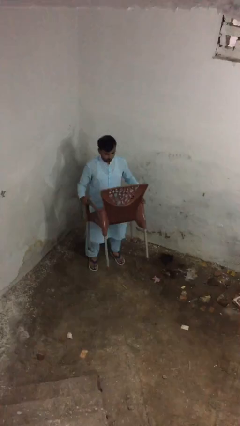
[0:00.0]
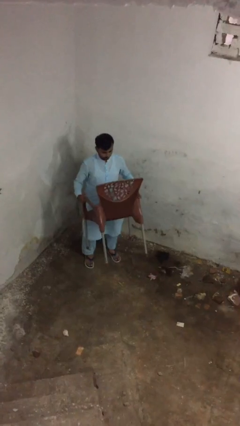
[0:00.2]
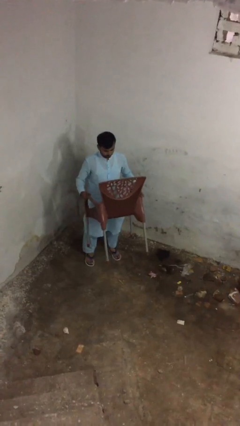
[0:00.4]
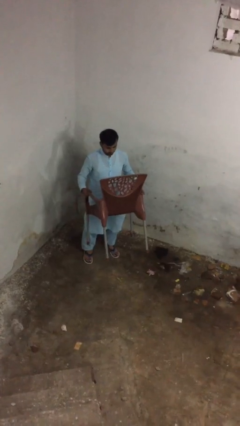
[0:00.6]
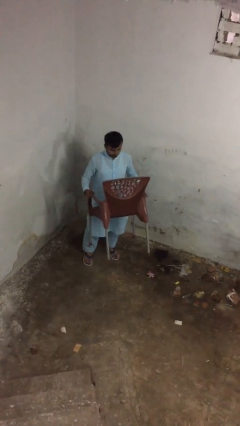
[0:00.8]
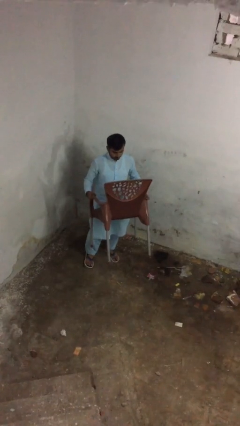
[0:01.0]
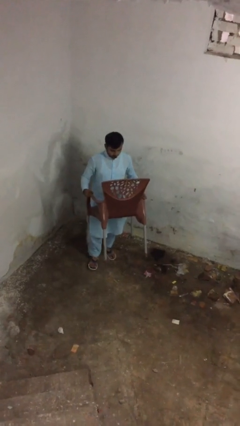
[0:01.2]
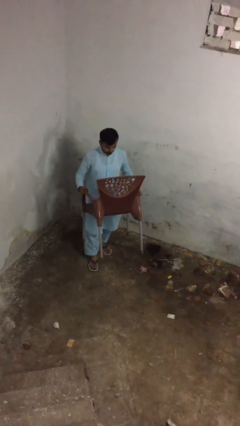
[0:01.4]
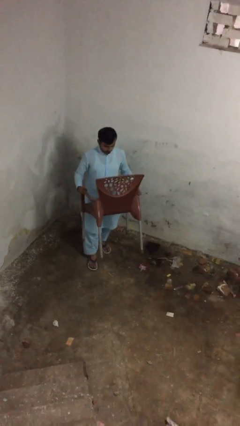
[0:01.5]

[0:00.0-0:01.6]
person carries heavy object

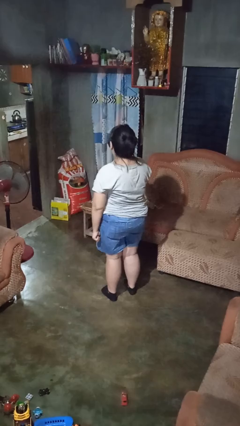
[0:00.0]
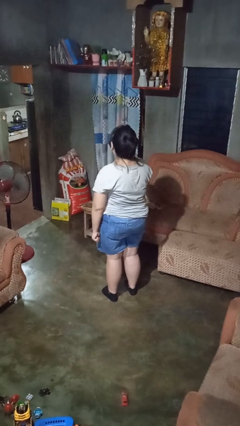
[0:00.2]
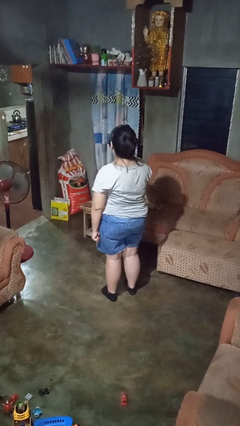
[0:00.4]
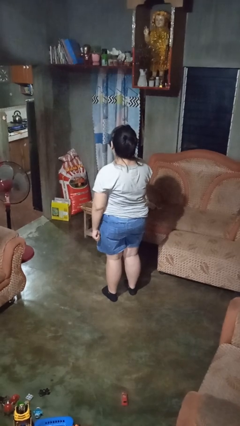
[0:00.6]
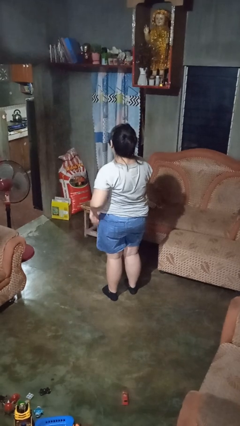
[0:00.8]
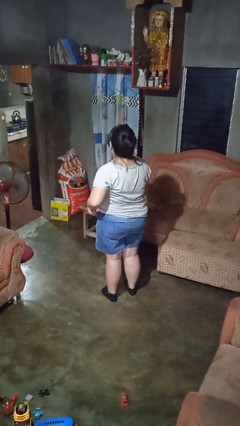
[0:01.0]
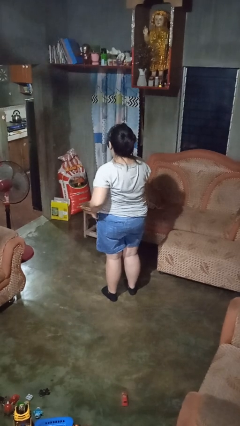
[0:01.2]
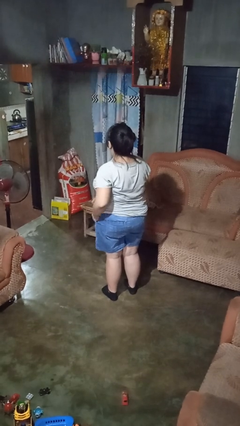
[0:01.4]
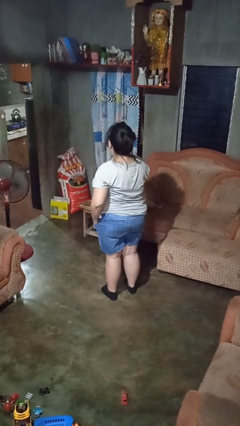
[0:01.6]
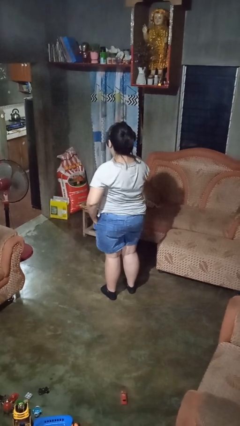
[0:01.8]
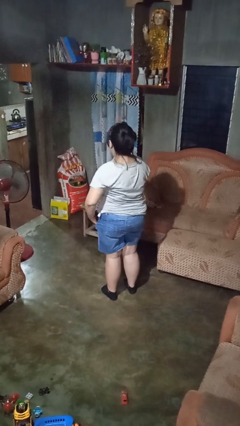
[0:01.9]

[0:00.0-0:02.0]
person puts hands in back pockets

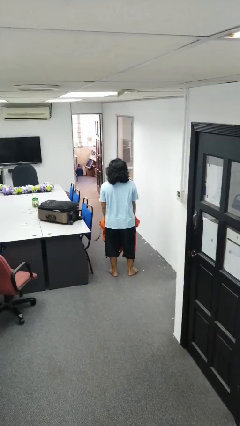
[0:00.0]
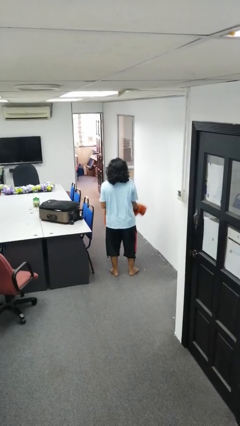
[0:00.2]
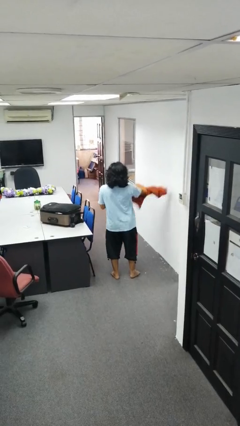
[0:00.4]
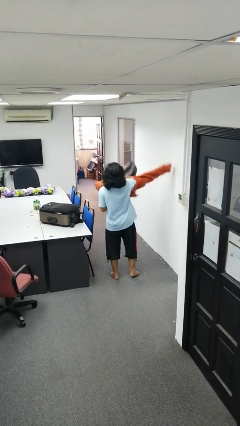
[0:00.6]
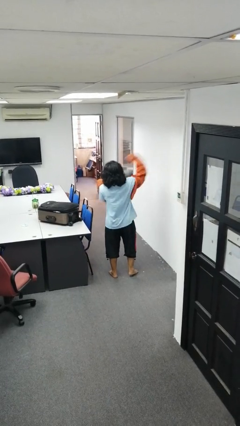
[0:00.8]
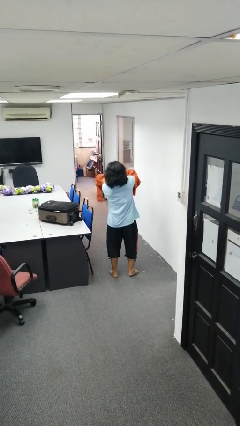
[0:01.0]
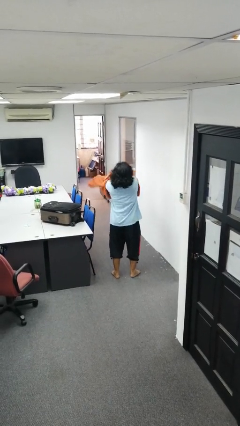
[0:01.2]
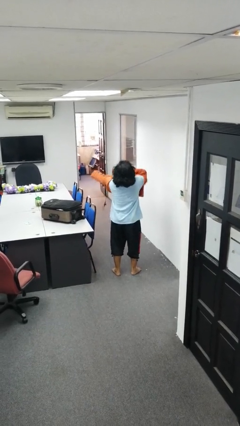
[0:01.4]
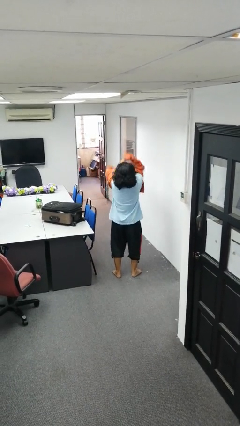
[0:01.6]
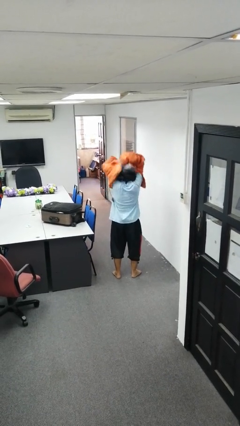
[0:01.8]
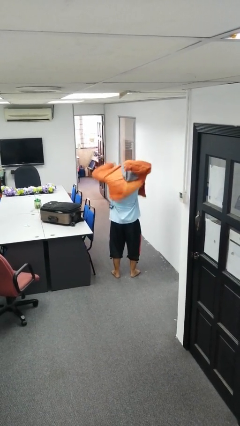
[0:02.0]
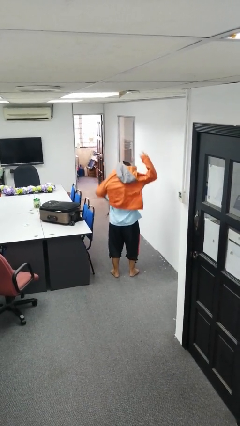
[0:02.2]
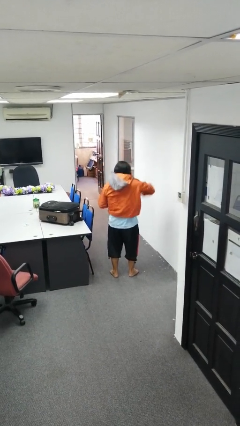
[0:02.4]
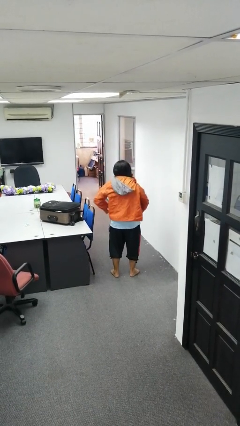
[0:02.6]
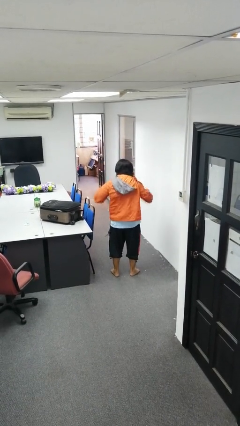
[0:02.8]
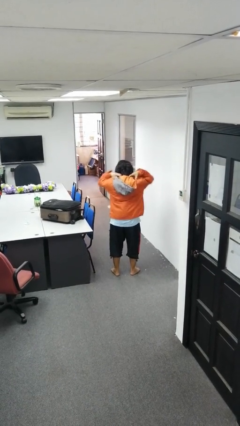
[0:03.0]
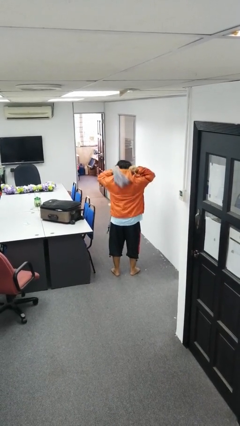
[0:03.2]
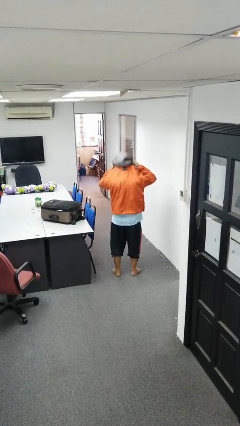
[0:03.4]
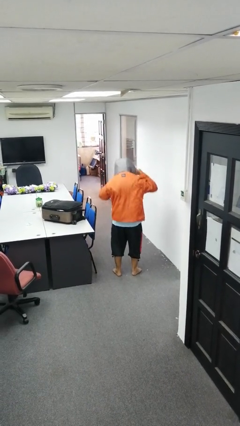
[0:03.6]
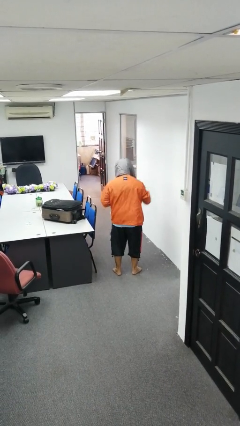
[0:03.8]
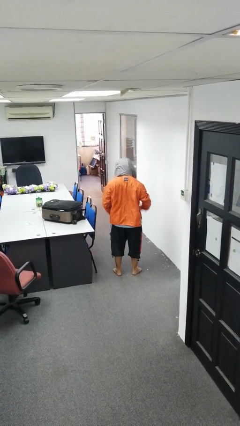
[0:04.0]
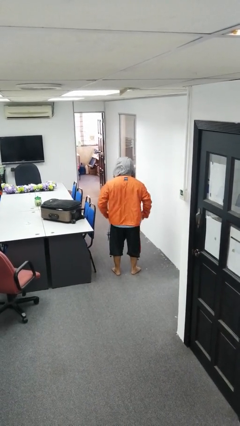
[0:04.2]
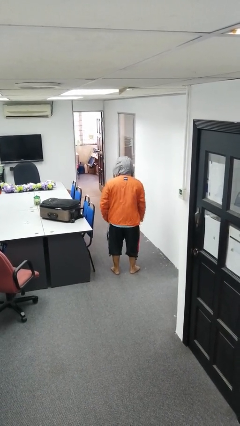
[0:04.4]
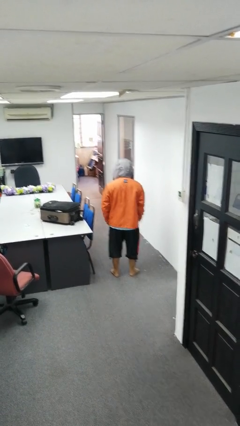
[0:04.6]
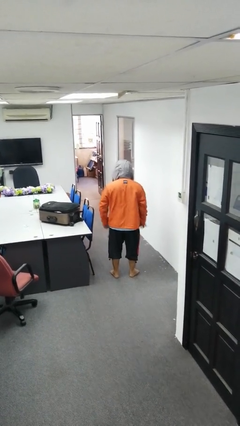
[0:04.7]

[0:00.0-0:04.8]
person puts on hoodie

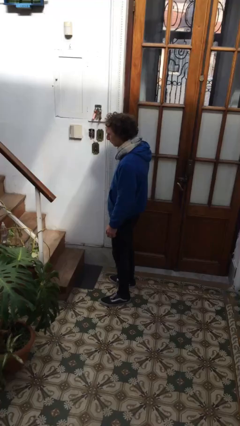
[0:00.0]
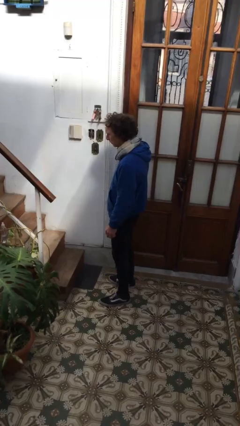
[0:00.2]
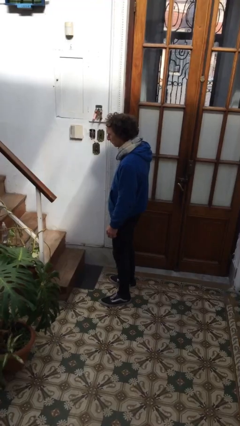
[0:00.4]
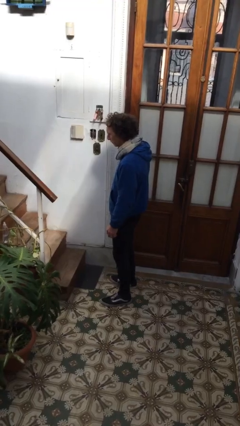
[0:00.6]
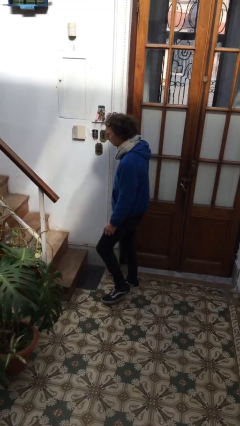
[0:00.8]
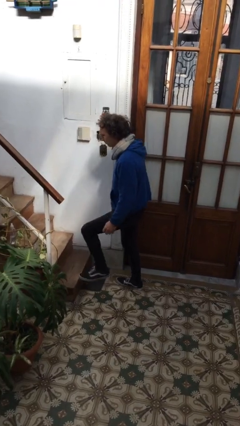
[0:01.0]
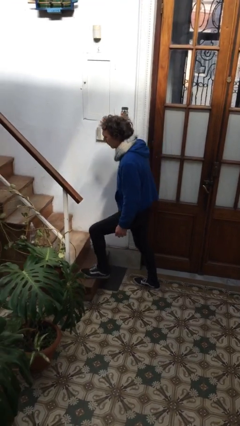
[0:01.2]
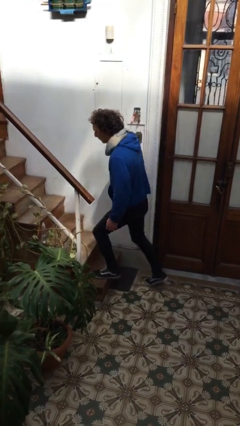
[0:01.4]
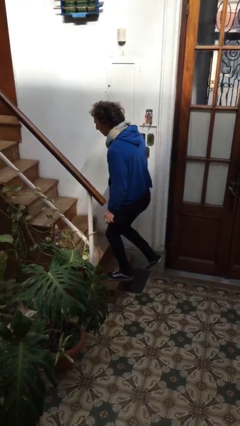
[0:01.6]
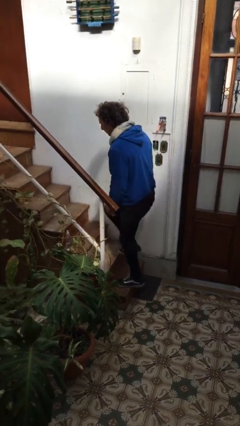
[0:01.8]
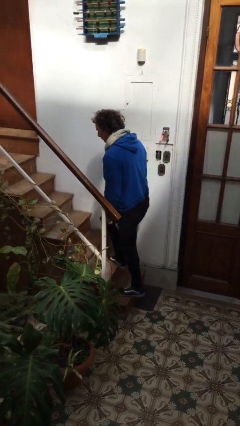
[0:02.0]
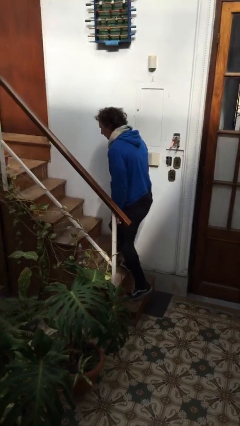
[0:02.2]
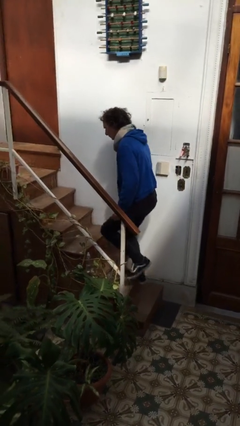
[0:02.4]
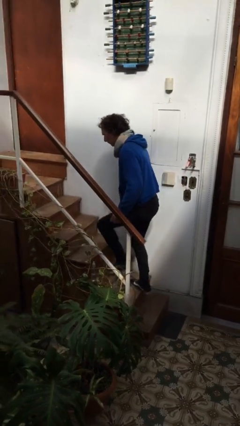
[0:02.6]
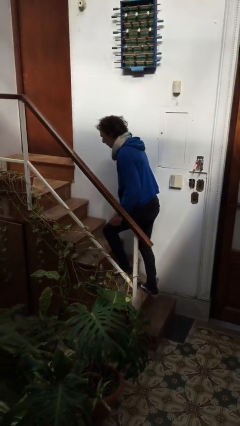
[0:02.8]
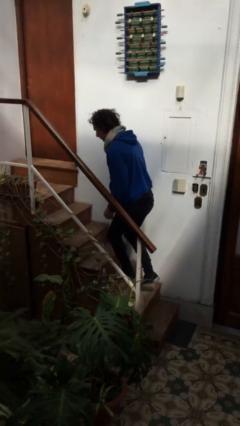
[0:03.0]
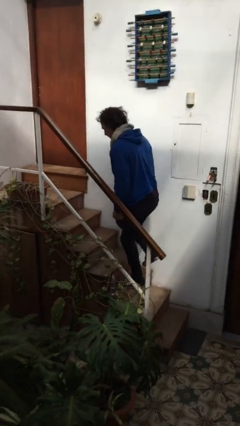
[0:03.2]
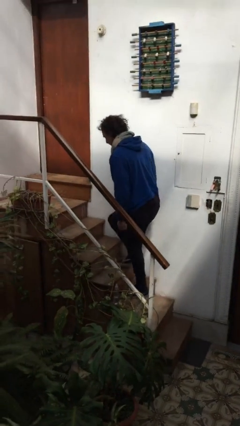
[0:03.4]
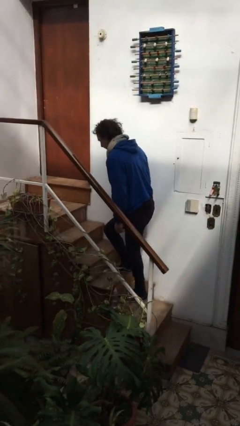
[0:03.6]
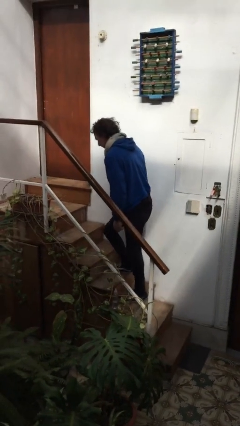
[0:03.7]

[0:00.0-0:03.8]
person climbs up stairs

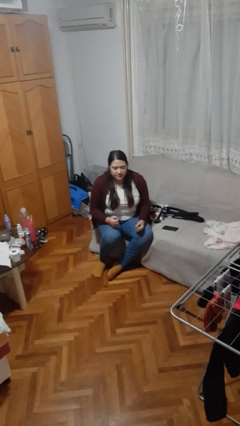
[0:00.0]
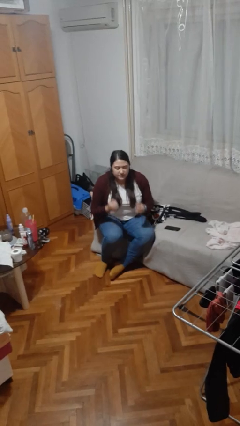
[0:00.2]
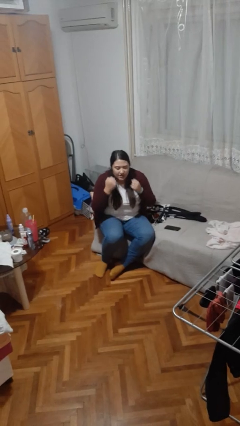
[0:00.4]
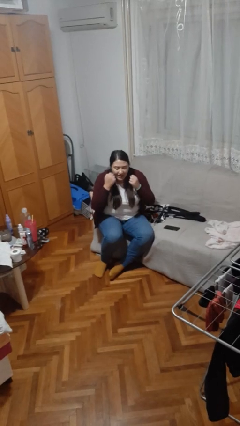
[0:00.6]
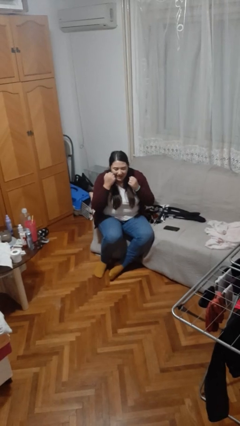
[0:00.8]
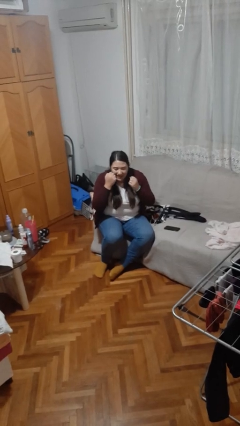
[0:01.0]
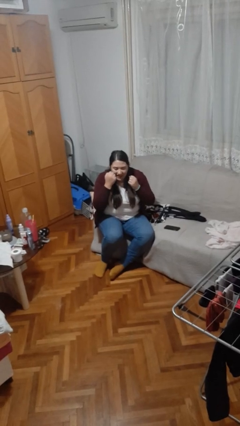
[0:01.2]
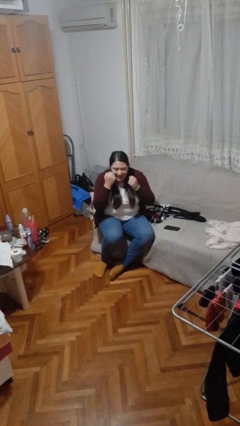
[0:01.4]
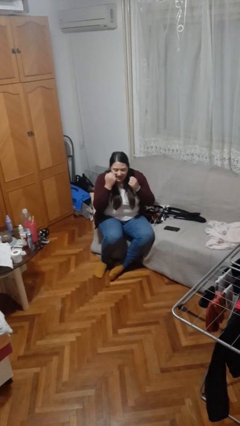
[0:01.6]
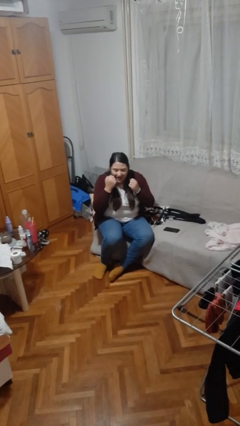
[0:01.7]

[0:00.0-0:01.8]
person flosses

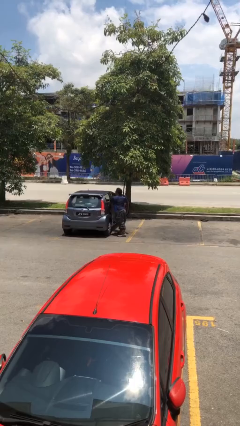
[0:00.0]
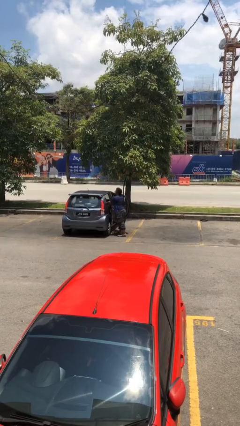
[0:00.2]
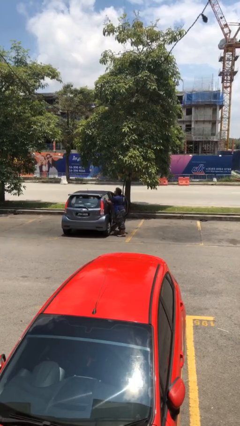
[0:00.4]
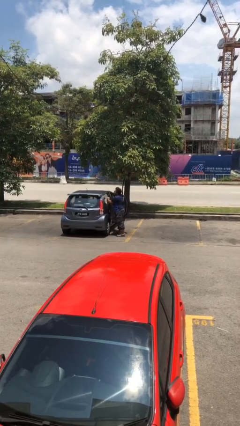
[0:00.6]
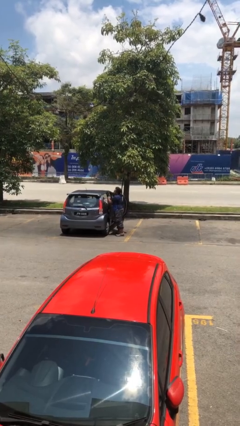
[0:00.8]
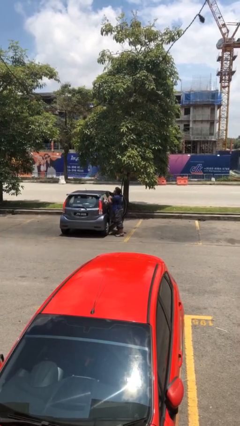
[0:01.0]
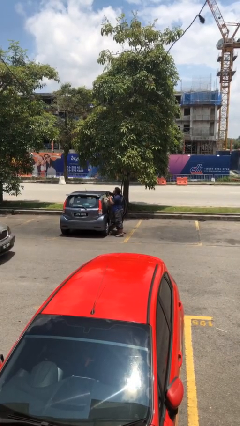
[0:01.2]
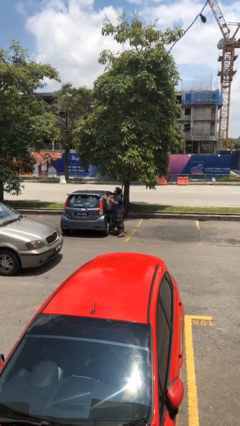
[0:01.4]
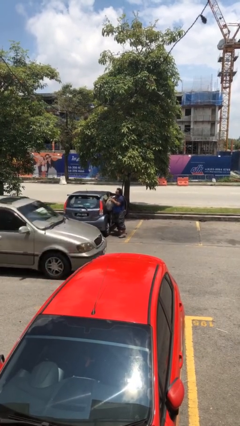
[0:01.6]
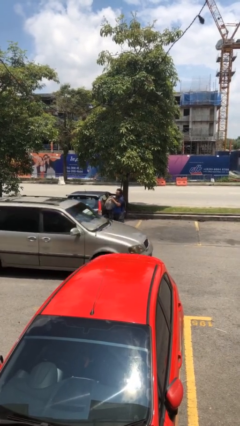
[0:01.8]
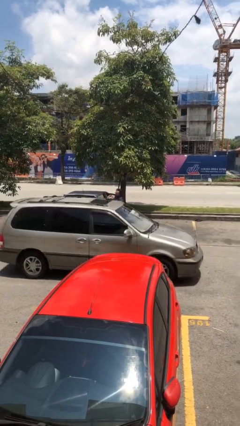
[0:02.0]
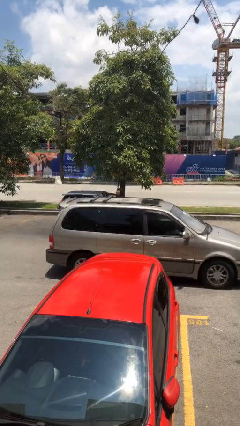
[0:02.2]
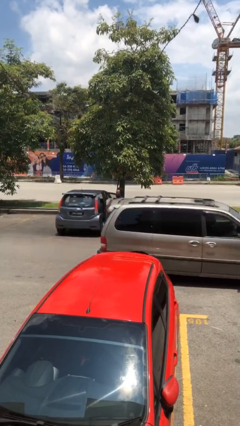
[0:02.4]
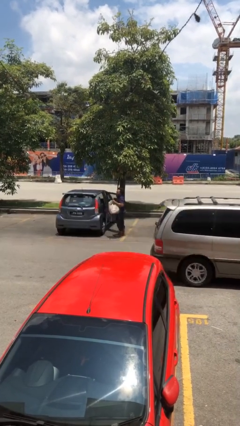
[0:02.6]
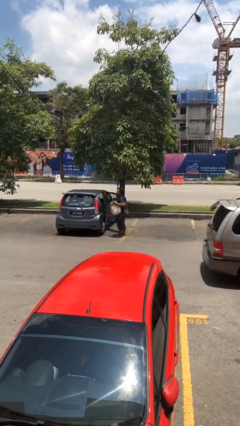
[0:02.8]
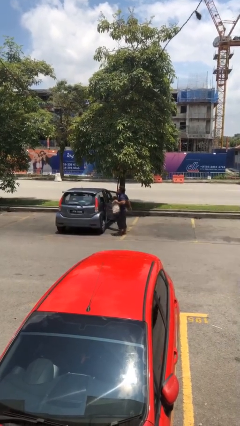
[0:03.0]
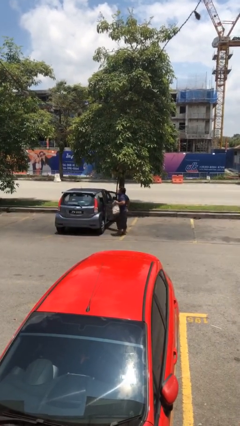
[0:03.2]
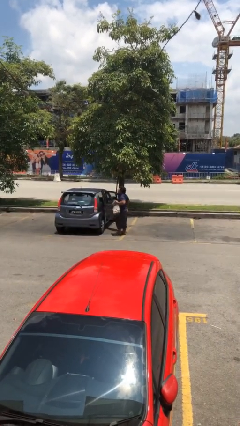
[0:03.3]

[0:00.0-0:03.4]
person unloads car
